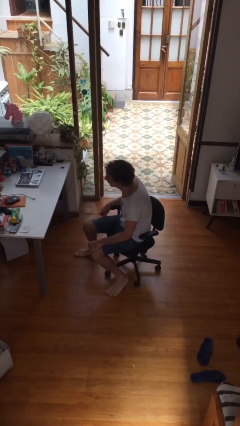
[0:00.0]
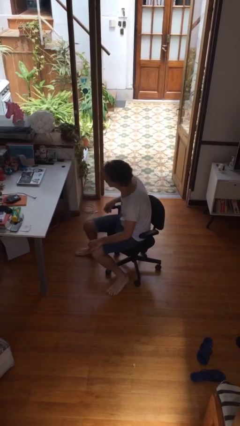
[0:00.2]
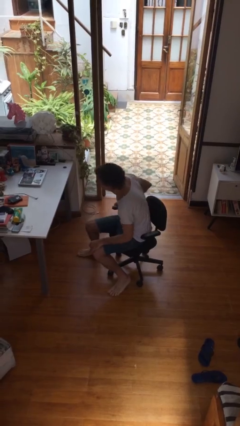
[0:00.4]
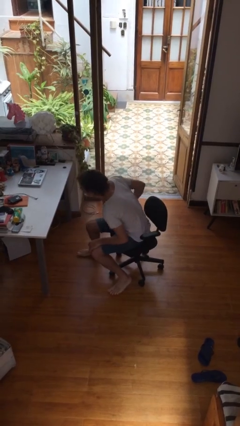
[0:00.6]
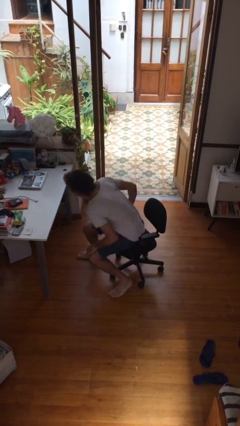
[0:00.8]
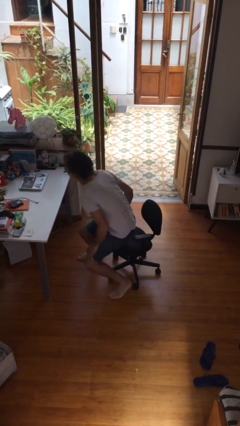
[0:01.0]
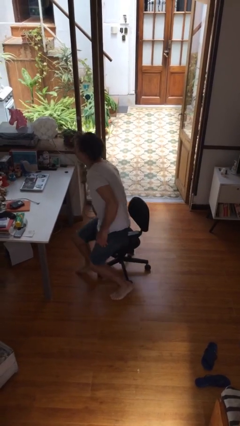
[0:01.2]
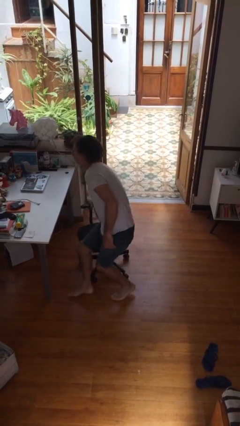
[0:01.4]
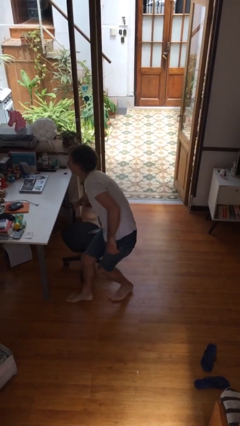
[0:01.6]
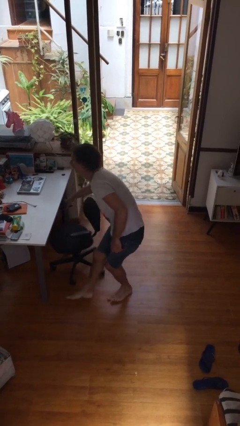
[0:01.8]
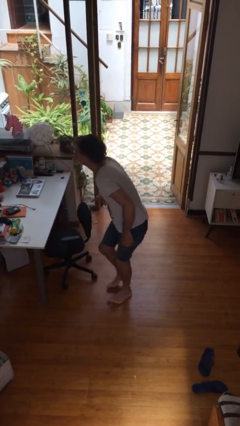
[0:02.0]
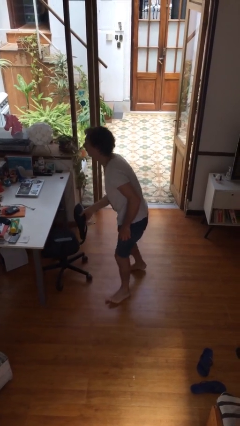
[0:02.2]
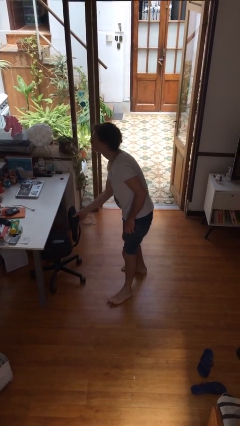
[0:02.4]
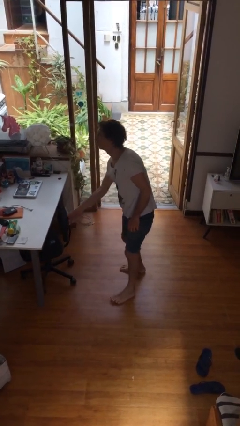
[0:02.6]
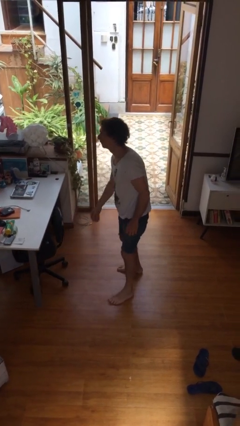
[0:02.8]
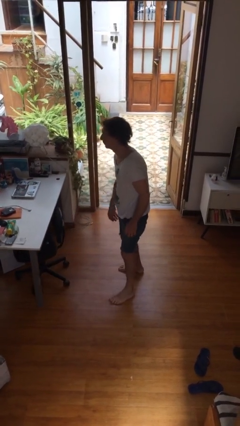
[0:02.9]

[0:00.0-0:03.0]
person stands up

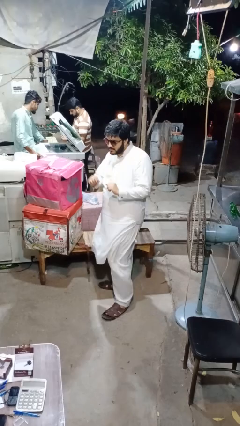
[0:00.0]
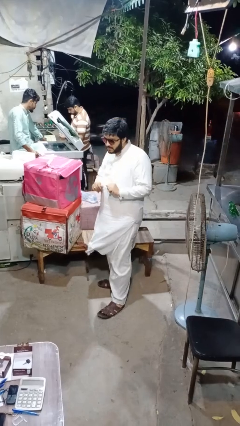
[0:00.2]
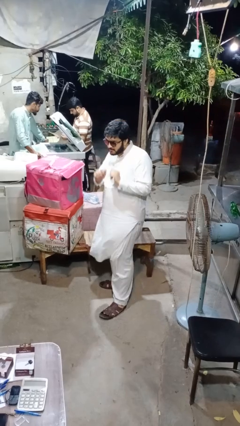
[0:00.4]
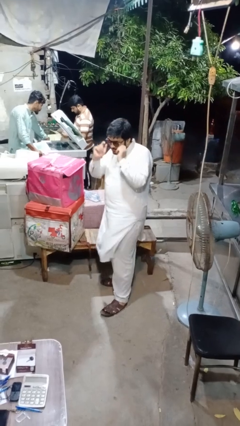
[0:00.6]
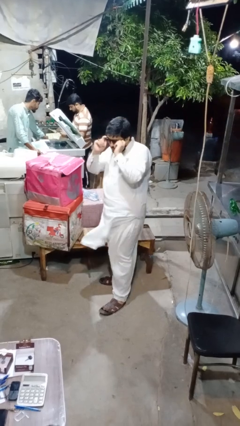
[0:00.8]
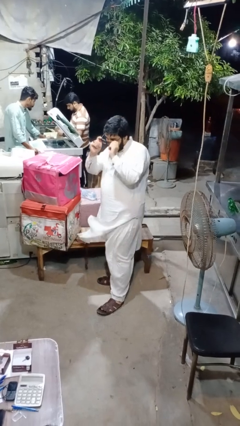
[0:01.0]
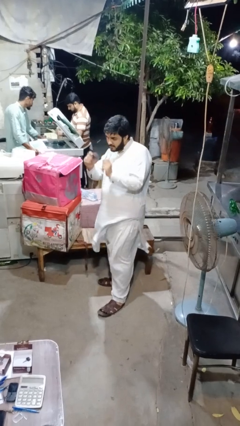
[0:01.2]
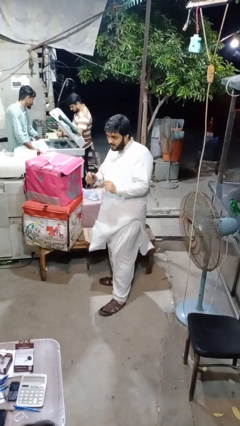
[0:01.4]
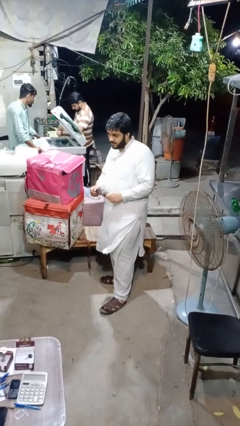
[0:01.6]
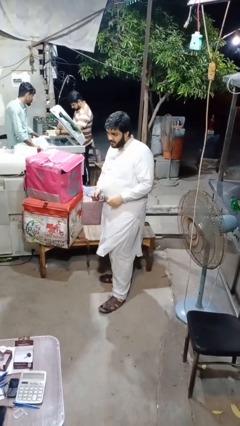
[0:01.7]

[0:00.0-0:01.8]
person takes off glasses

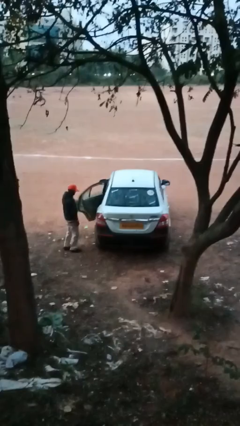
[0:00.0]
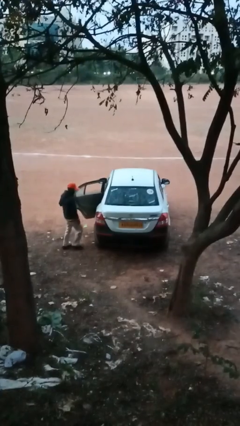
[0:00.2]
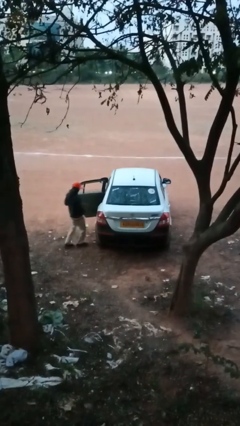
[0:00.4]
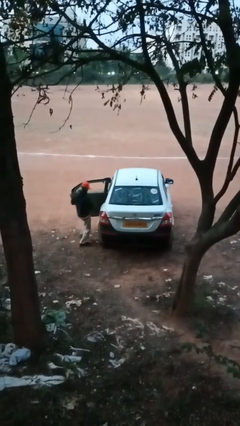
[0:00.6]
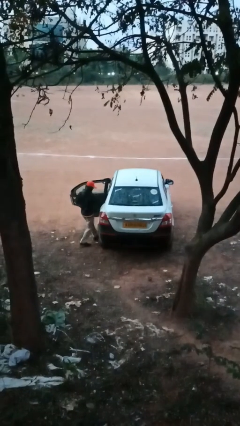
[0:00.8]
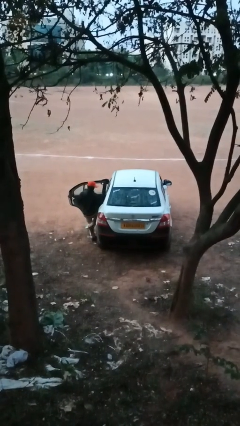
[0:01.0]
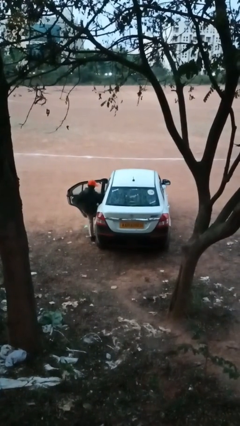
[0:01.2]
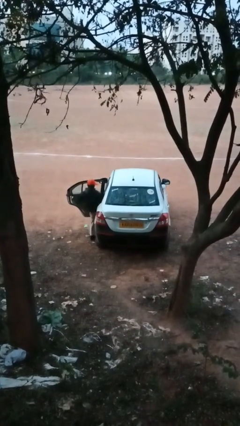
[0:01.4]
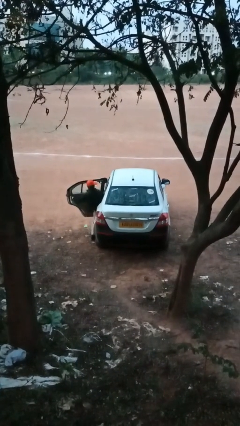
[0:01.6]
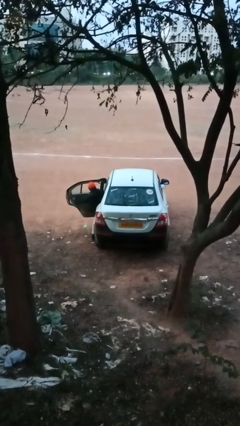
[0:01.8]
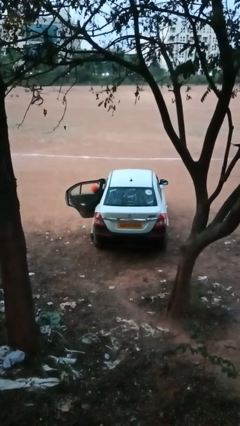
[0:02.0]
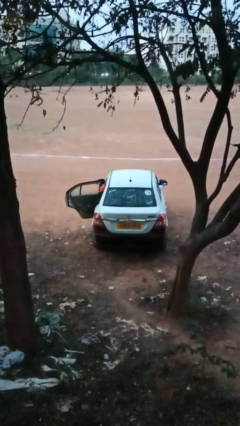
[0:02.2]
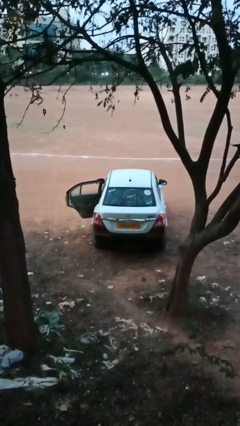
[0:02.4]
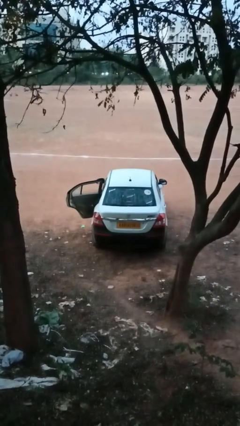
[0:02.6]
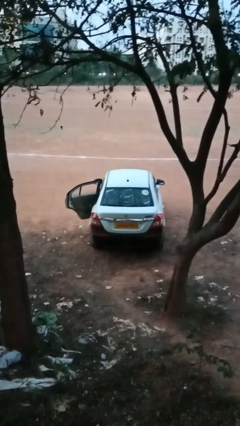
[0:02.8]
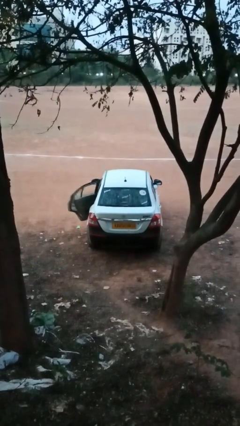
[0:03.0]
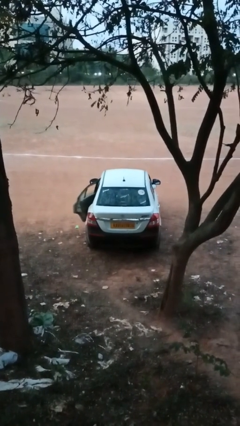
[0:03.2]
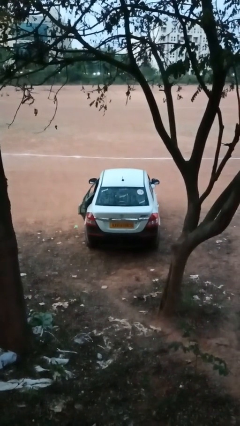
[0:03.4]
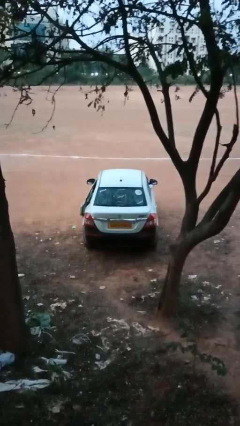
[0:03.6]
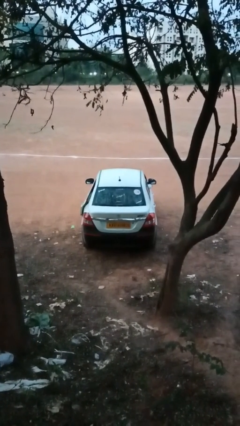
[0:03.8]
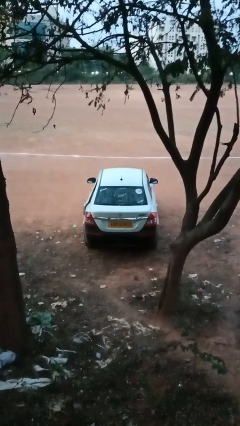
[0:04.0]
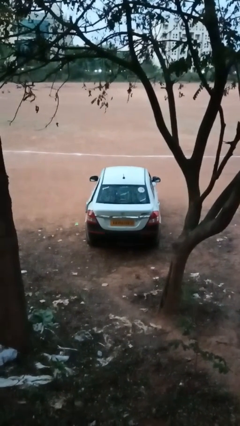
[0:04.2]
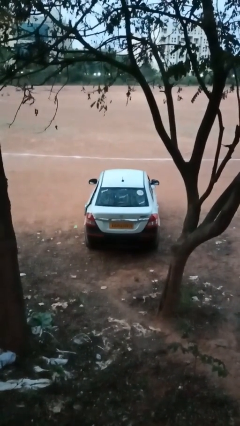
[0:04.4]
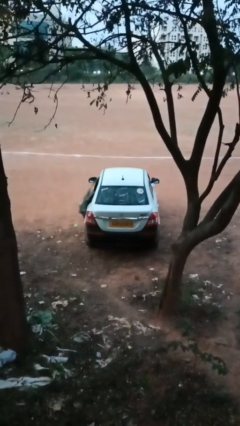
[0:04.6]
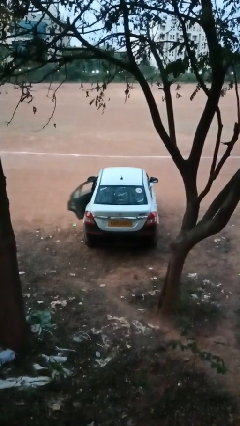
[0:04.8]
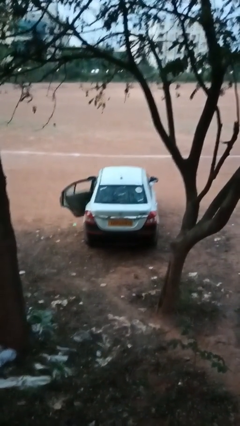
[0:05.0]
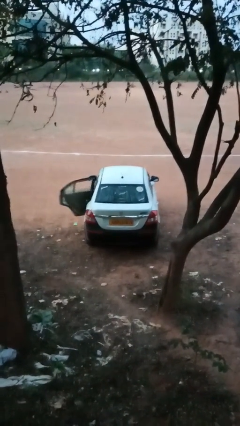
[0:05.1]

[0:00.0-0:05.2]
car picks up person

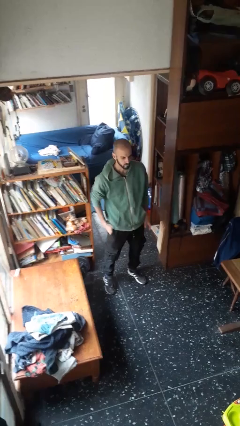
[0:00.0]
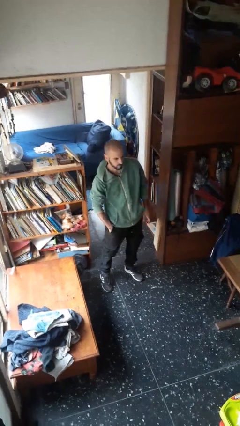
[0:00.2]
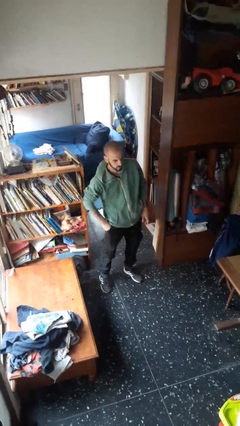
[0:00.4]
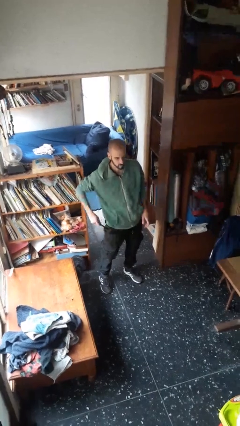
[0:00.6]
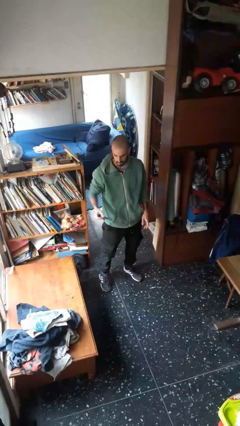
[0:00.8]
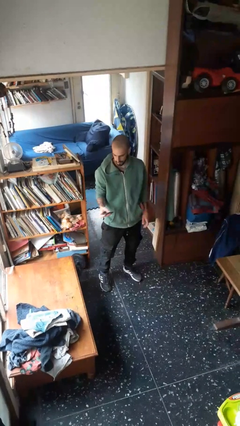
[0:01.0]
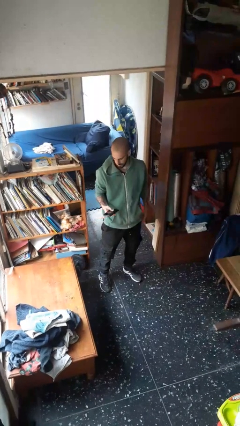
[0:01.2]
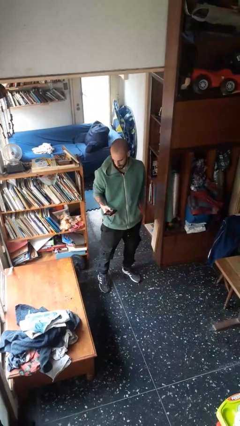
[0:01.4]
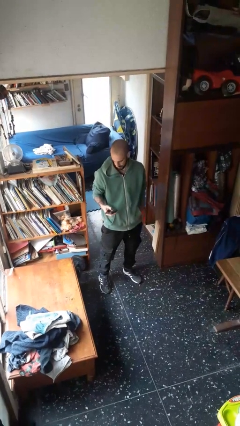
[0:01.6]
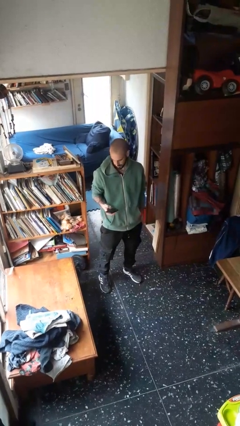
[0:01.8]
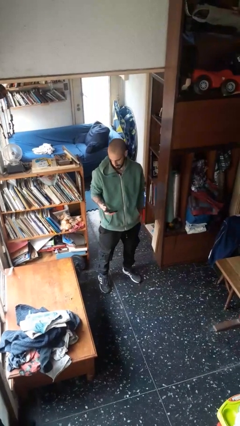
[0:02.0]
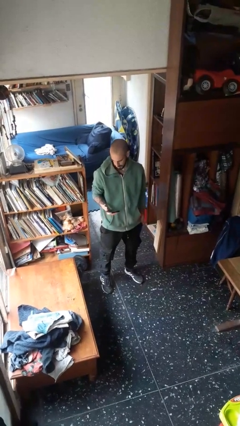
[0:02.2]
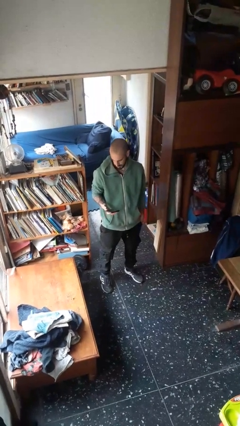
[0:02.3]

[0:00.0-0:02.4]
person takes phone from pocket

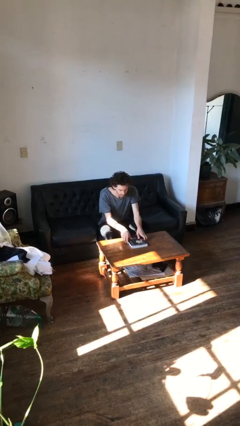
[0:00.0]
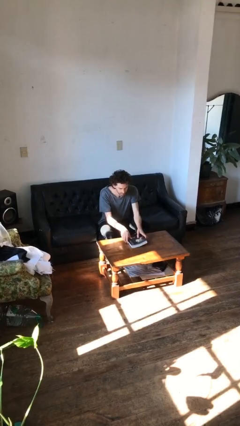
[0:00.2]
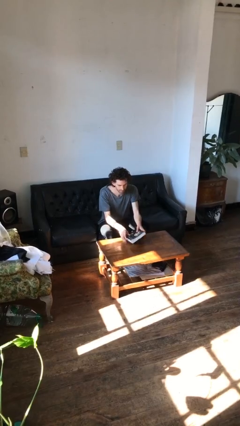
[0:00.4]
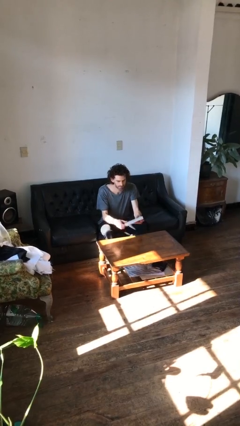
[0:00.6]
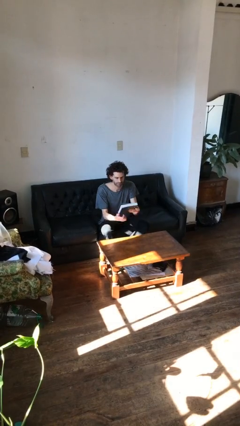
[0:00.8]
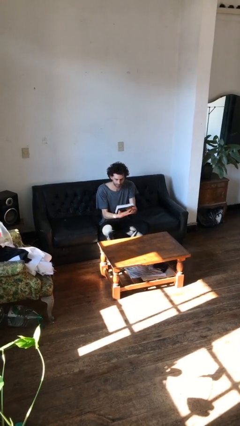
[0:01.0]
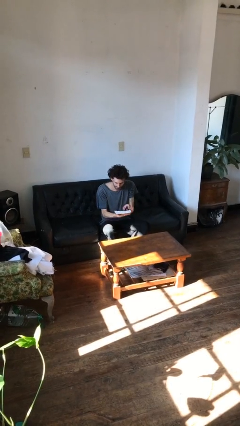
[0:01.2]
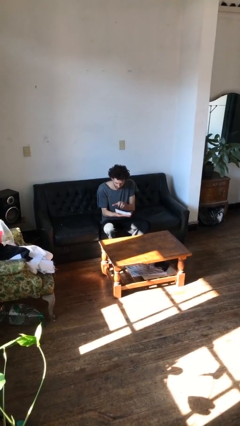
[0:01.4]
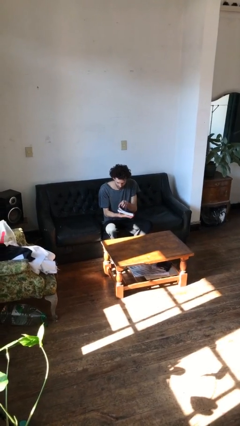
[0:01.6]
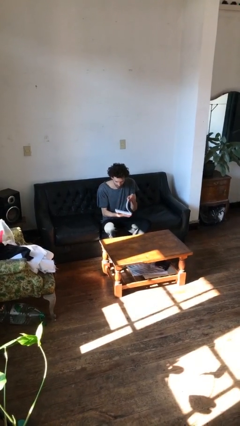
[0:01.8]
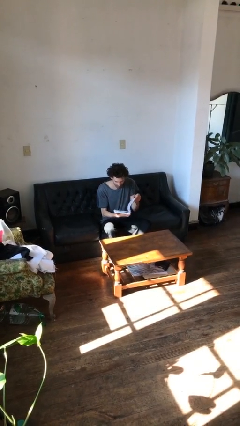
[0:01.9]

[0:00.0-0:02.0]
person picks up object from table

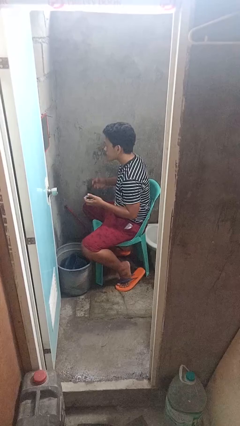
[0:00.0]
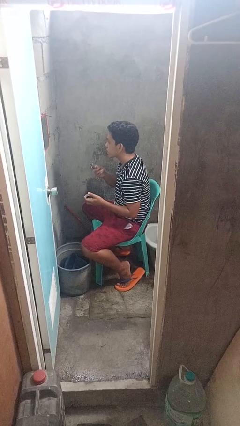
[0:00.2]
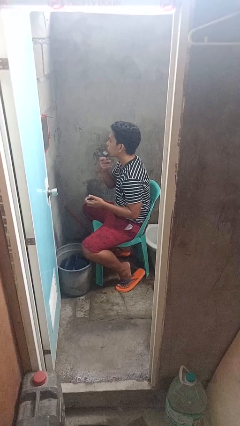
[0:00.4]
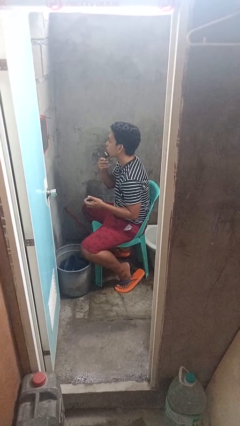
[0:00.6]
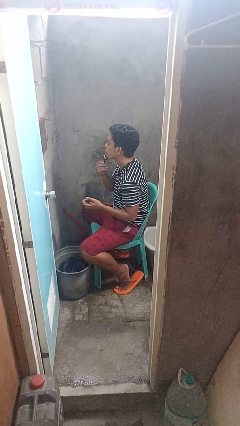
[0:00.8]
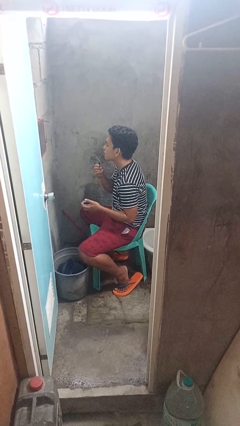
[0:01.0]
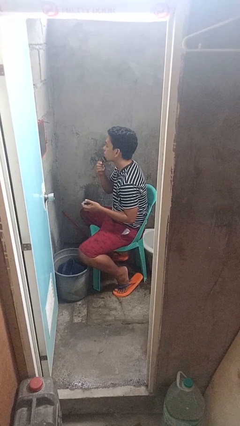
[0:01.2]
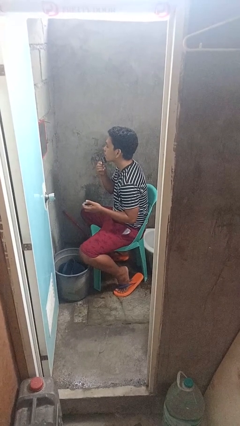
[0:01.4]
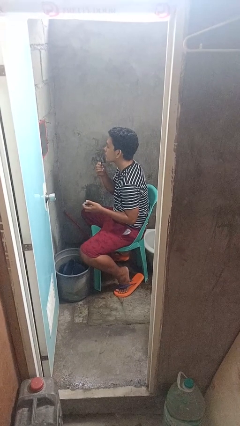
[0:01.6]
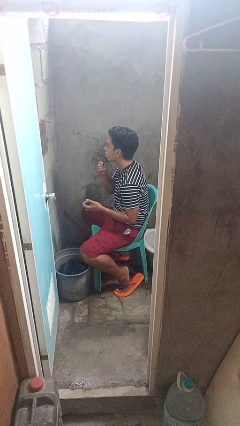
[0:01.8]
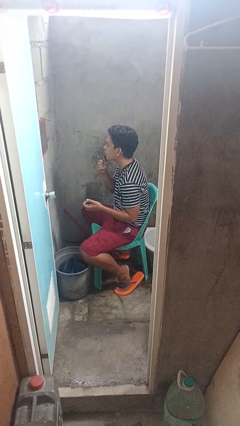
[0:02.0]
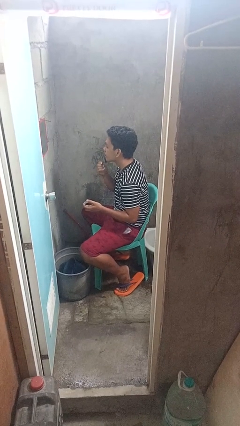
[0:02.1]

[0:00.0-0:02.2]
person shaves face

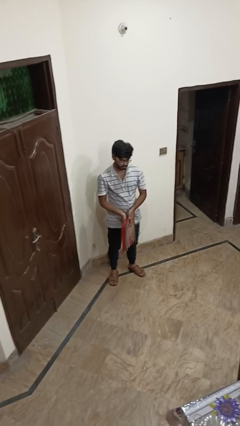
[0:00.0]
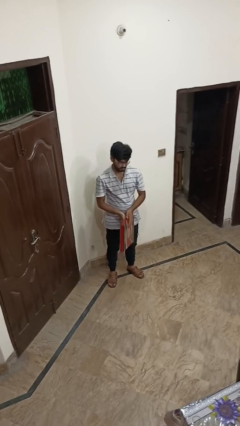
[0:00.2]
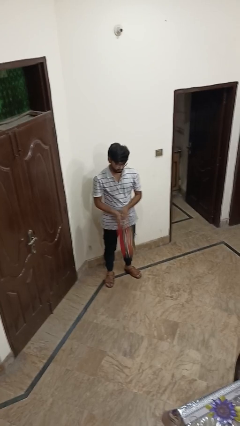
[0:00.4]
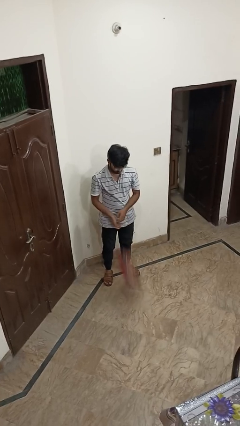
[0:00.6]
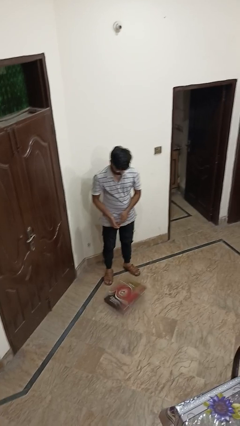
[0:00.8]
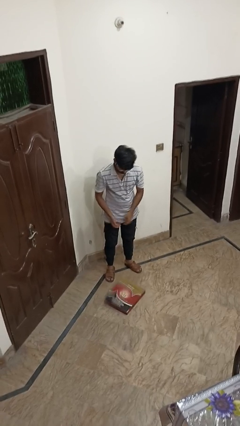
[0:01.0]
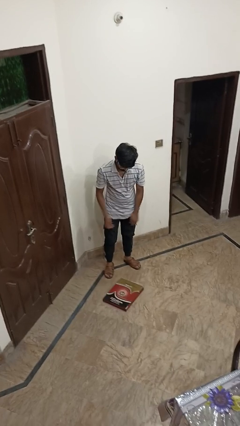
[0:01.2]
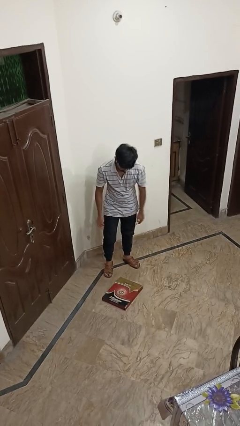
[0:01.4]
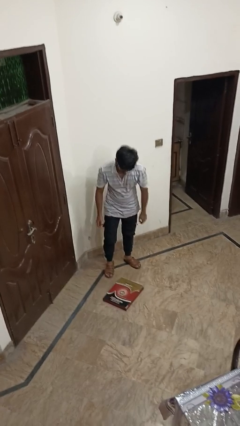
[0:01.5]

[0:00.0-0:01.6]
person drops object
